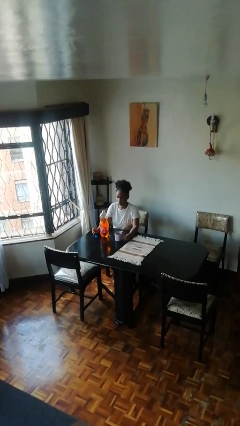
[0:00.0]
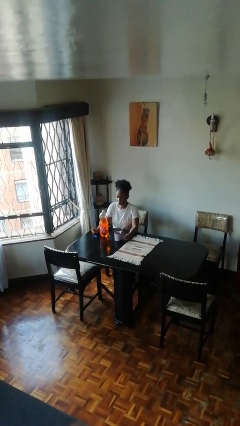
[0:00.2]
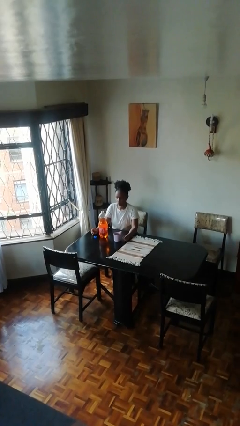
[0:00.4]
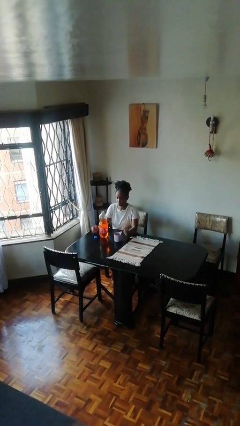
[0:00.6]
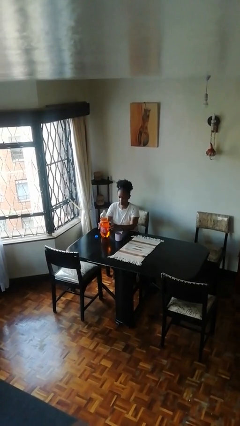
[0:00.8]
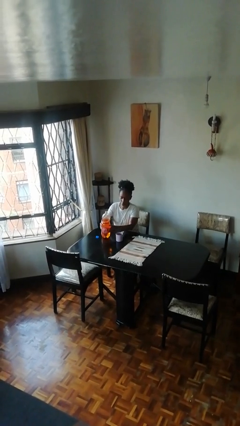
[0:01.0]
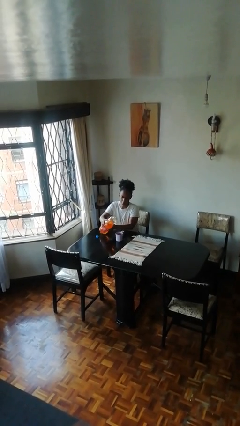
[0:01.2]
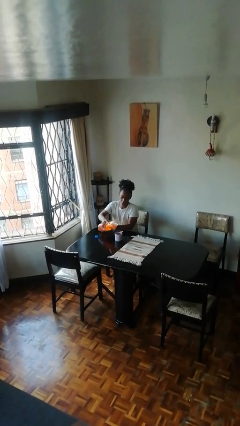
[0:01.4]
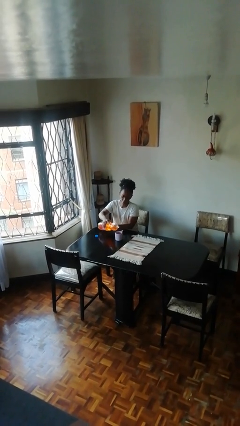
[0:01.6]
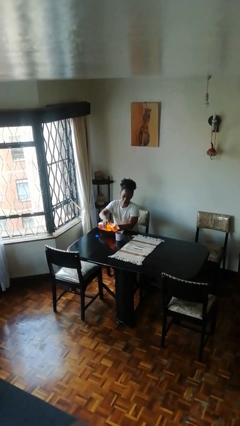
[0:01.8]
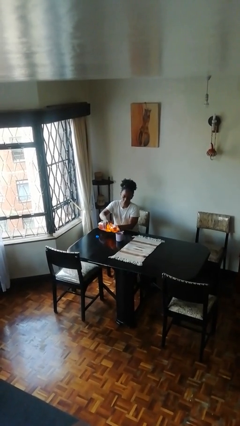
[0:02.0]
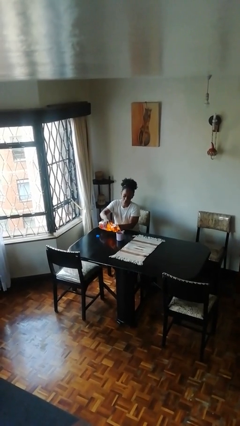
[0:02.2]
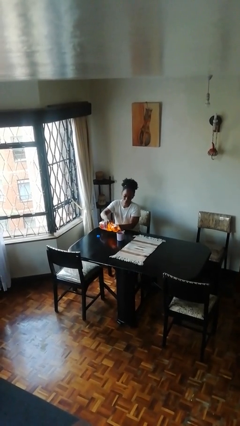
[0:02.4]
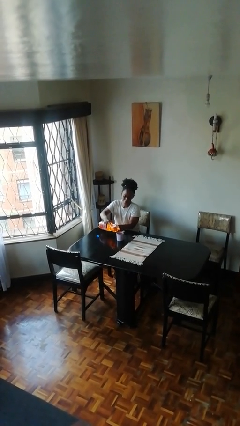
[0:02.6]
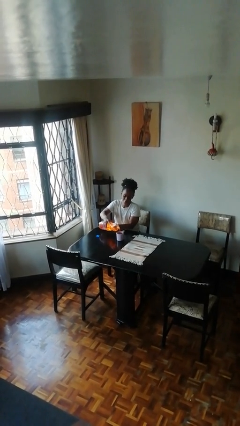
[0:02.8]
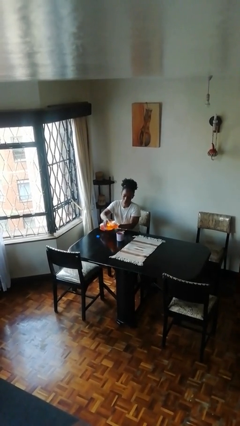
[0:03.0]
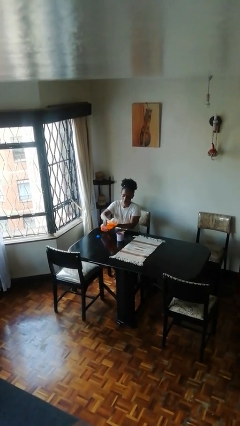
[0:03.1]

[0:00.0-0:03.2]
person pours liquid into cup

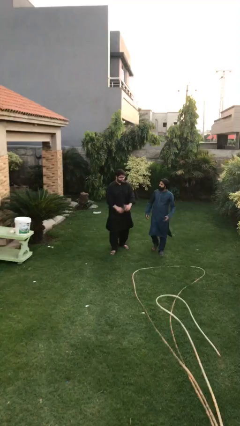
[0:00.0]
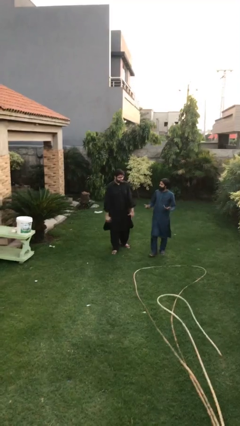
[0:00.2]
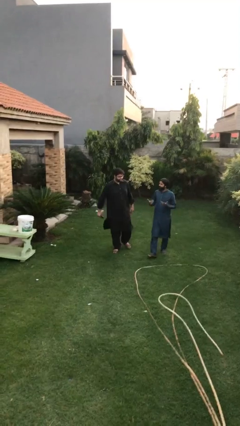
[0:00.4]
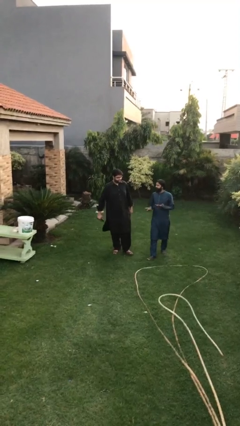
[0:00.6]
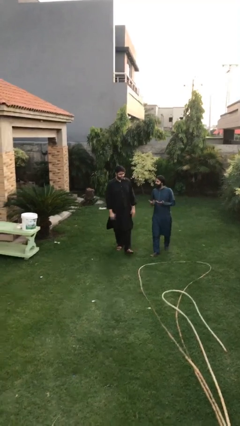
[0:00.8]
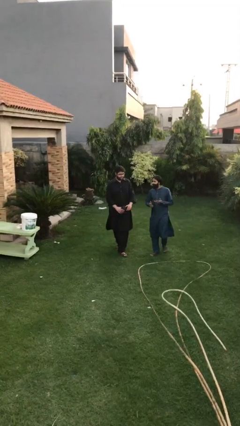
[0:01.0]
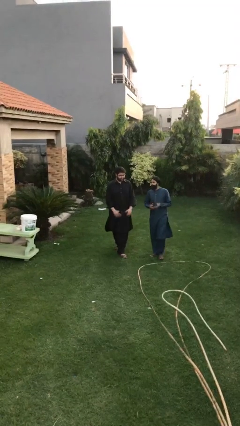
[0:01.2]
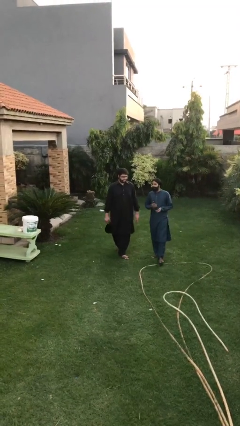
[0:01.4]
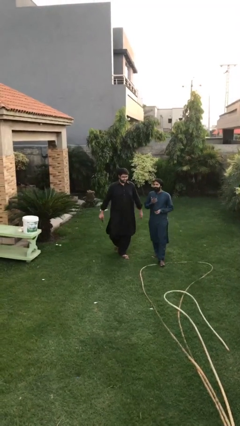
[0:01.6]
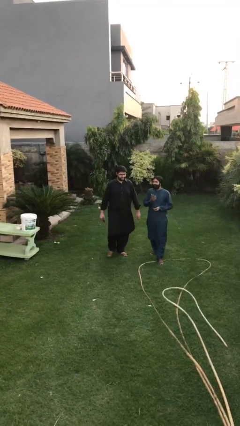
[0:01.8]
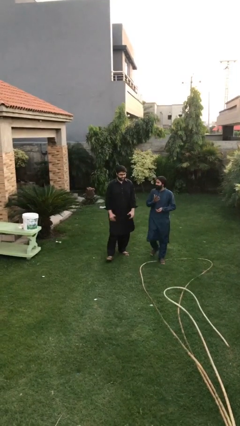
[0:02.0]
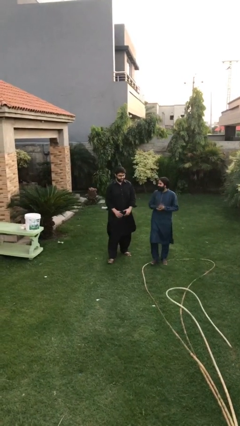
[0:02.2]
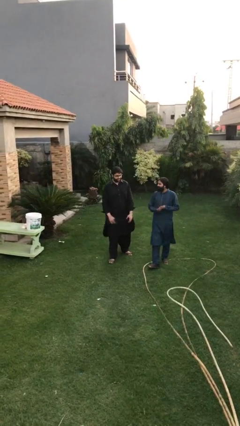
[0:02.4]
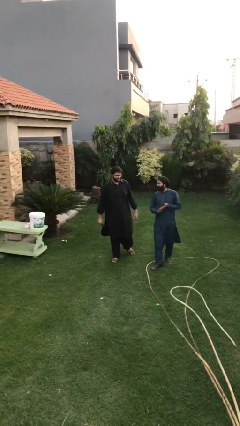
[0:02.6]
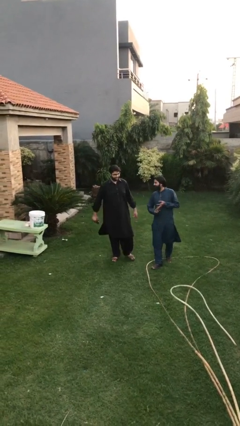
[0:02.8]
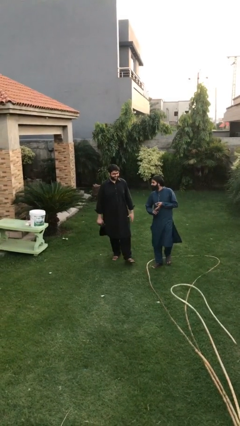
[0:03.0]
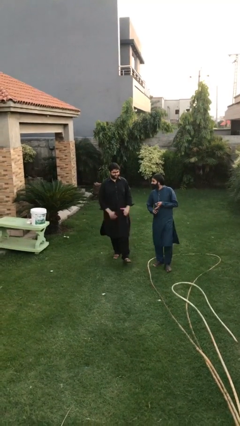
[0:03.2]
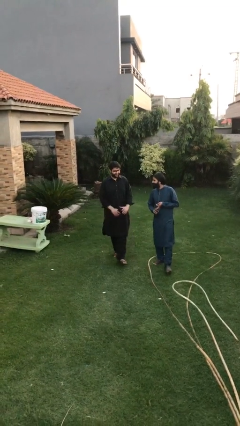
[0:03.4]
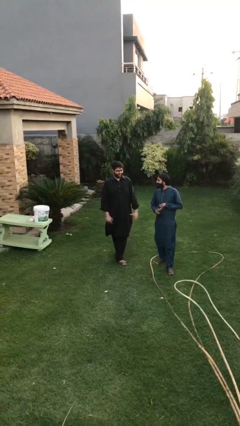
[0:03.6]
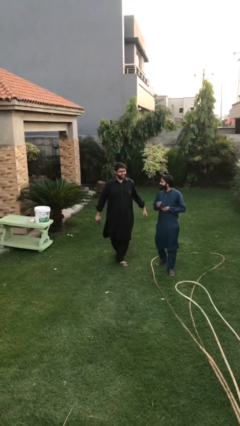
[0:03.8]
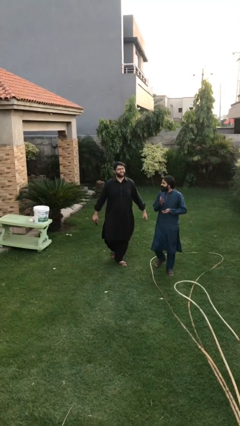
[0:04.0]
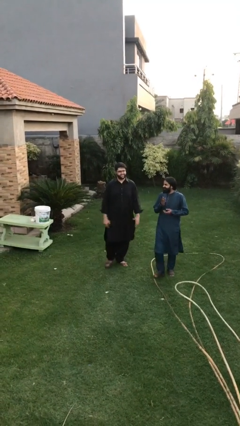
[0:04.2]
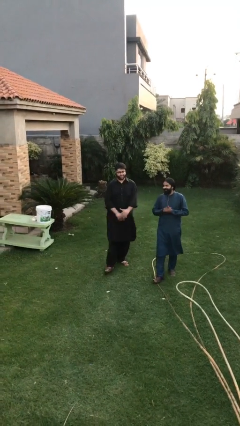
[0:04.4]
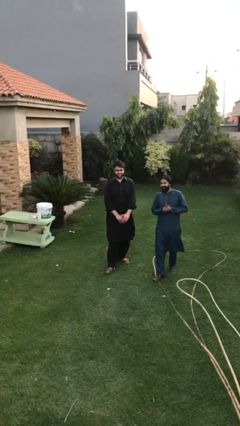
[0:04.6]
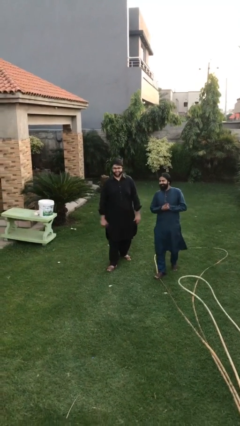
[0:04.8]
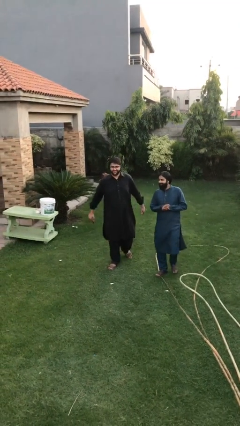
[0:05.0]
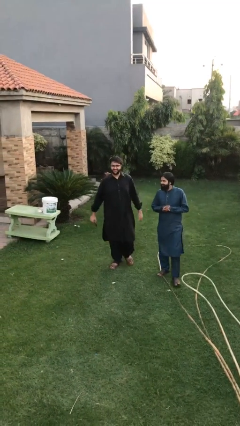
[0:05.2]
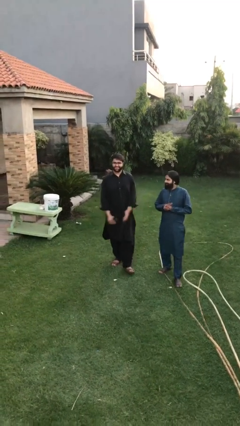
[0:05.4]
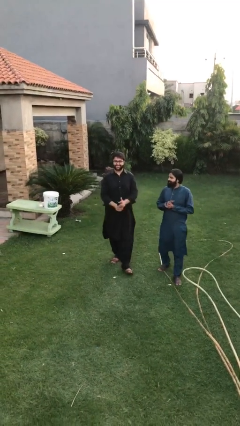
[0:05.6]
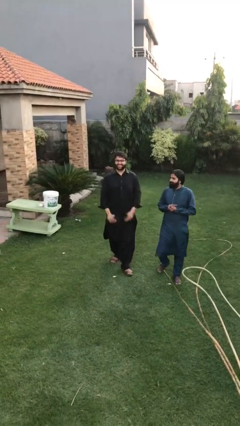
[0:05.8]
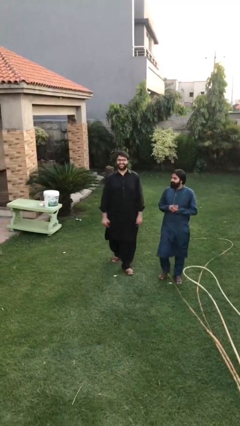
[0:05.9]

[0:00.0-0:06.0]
person talks to person

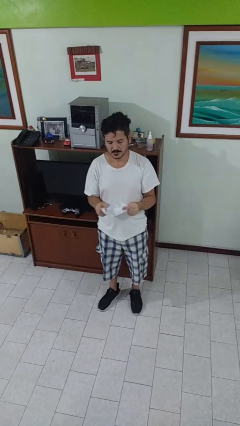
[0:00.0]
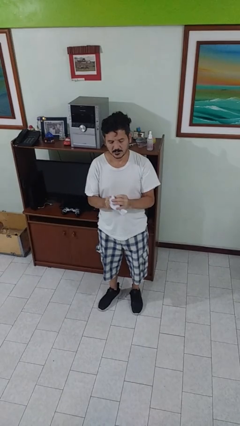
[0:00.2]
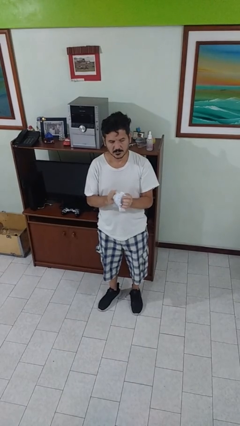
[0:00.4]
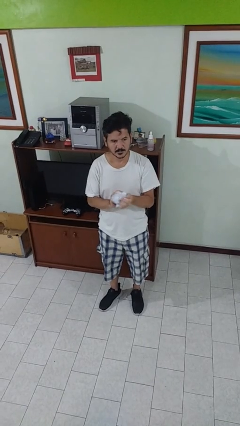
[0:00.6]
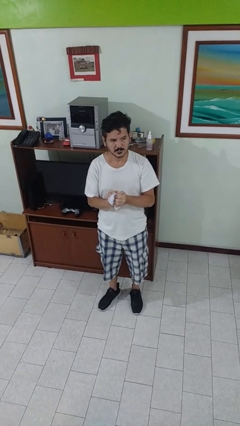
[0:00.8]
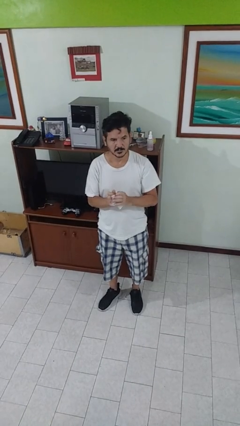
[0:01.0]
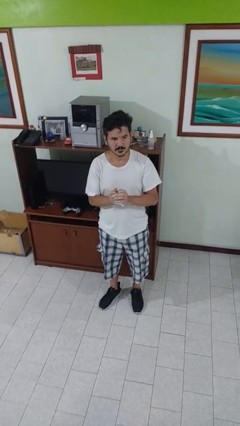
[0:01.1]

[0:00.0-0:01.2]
person crumples paper

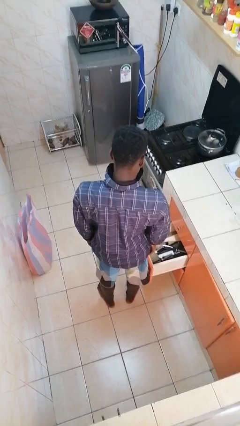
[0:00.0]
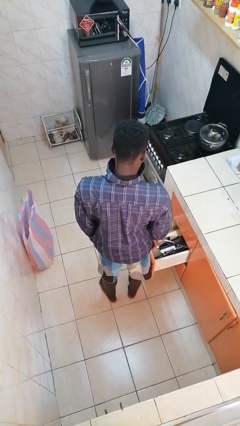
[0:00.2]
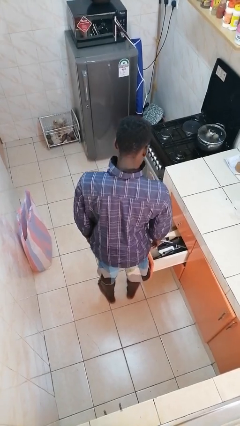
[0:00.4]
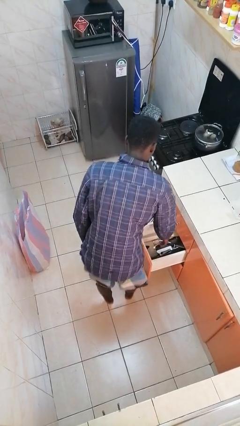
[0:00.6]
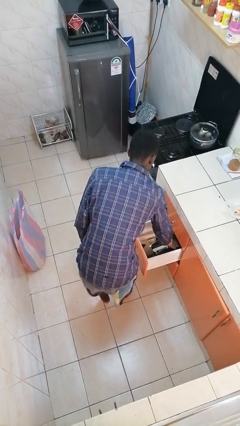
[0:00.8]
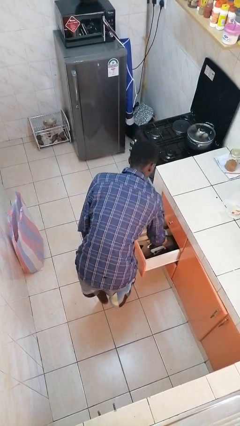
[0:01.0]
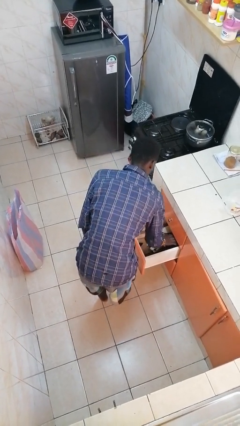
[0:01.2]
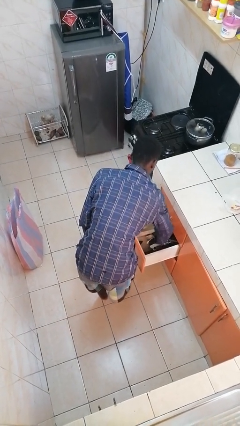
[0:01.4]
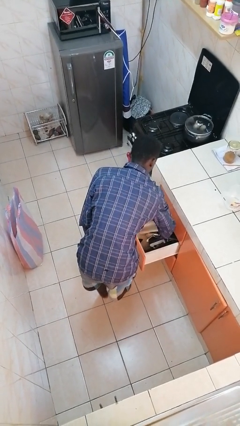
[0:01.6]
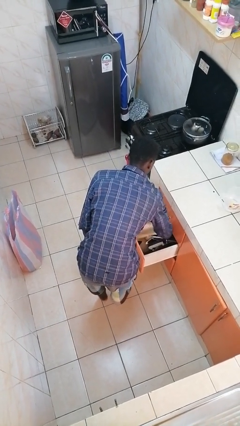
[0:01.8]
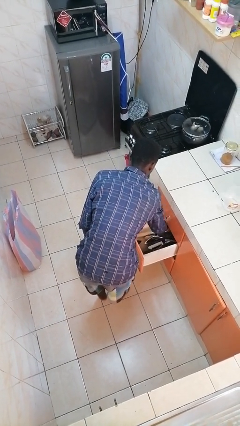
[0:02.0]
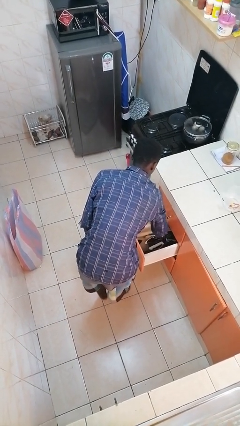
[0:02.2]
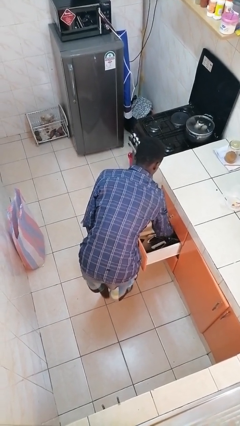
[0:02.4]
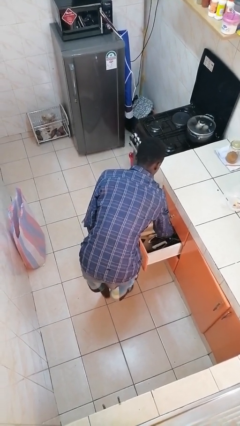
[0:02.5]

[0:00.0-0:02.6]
person searches in kitchen drawer

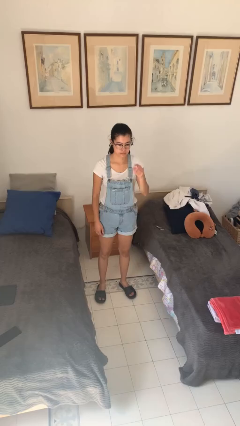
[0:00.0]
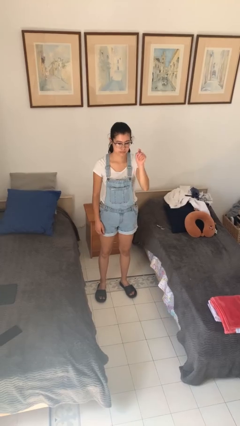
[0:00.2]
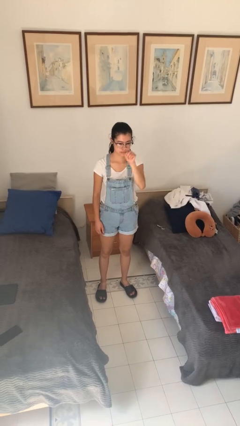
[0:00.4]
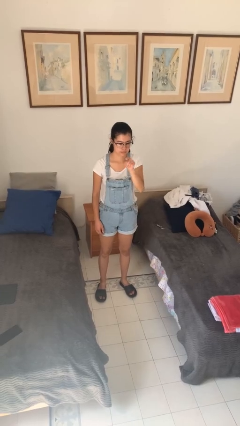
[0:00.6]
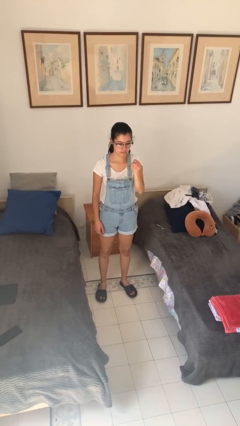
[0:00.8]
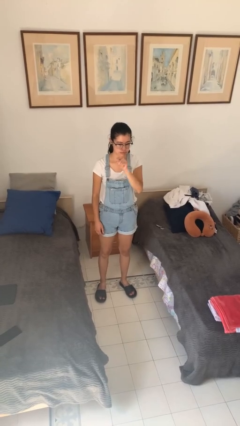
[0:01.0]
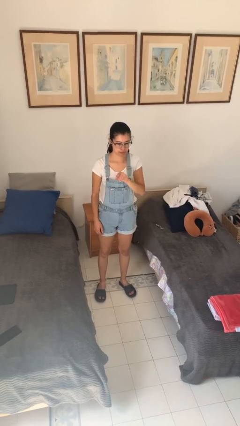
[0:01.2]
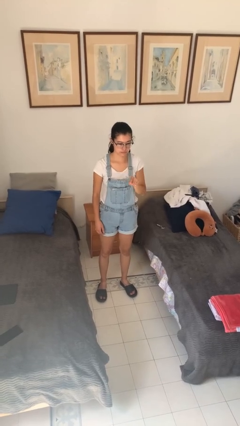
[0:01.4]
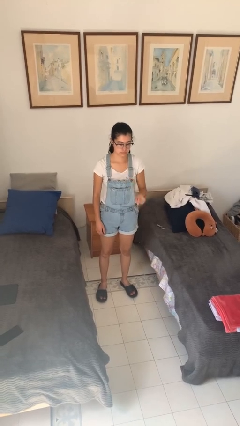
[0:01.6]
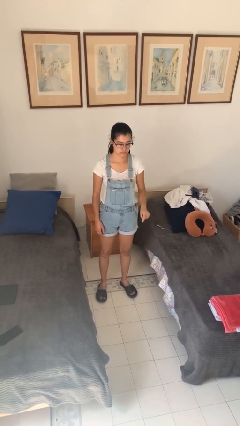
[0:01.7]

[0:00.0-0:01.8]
person gestures number three

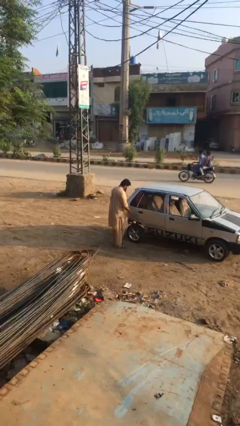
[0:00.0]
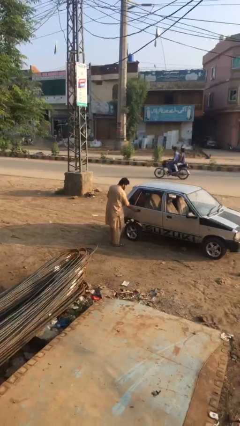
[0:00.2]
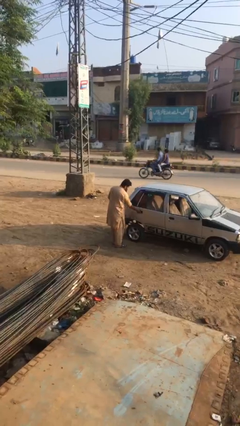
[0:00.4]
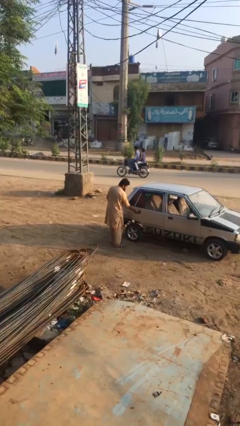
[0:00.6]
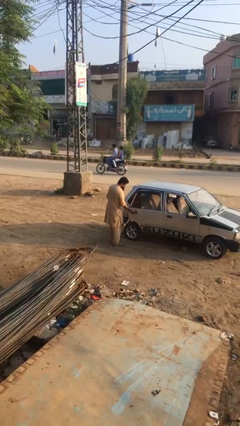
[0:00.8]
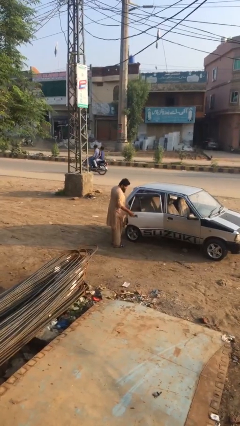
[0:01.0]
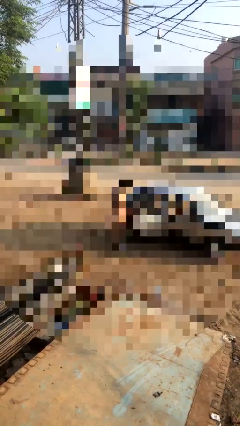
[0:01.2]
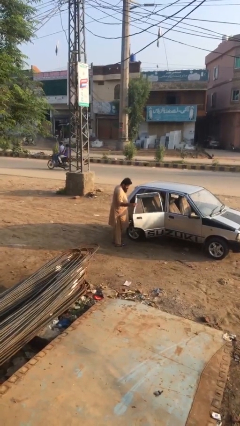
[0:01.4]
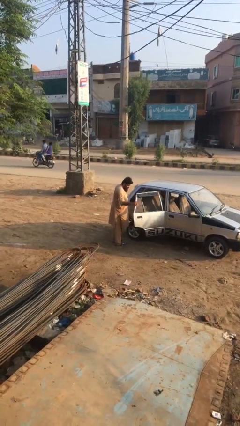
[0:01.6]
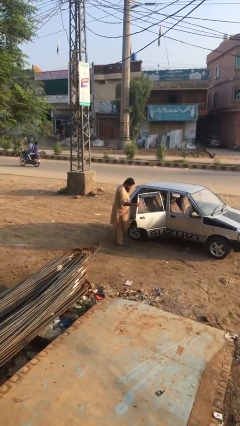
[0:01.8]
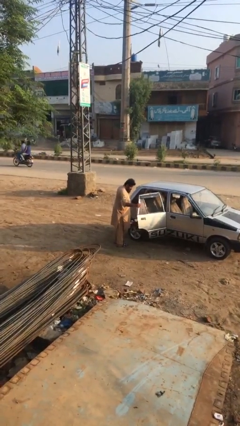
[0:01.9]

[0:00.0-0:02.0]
person opens car door

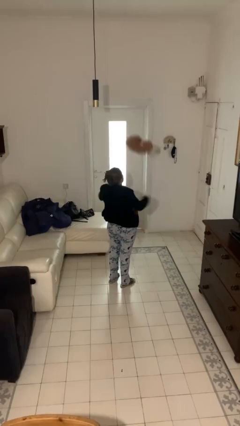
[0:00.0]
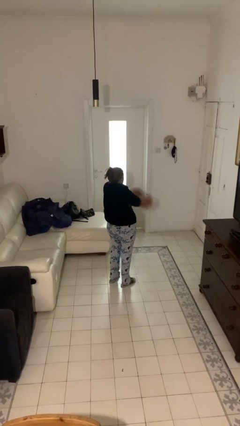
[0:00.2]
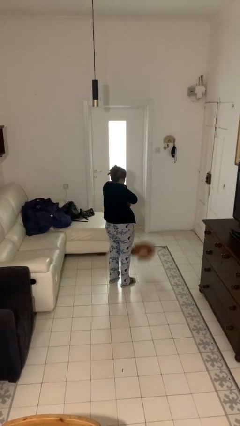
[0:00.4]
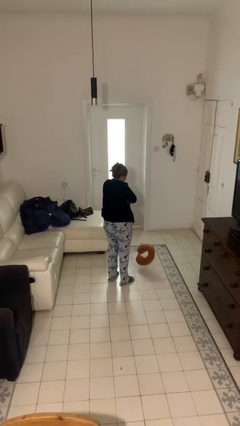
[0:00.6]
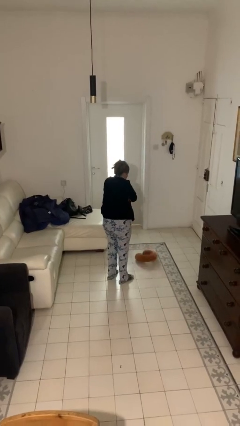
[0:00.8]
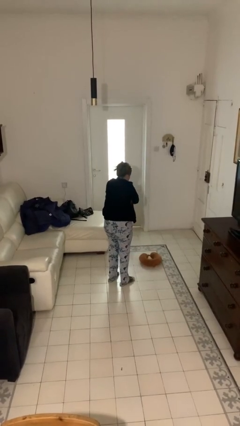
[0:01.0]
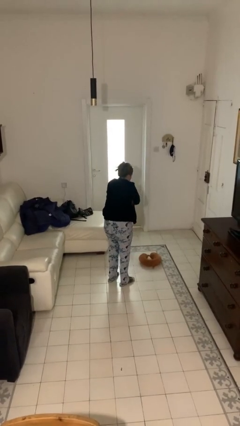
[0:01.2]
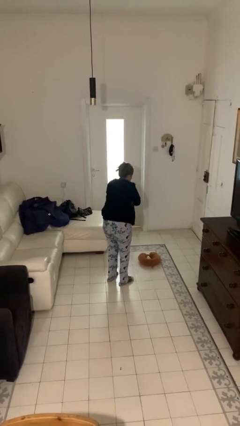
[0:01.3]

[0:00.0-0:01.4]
person catches dropped object
